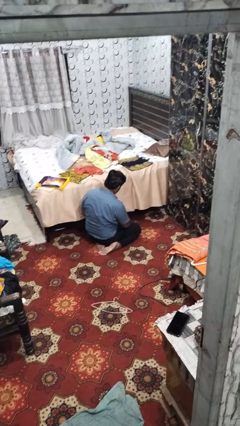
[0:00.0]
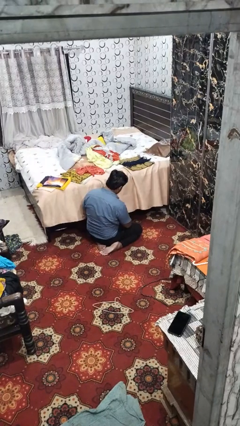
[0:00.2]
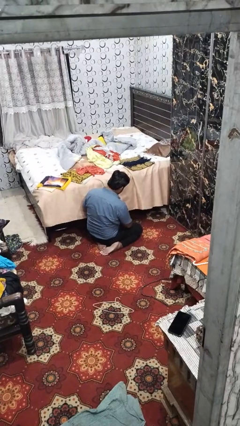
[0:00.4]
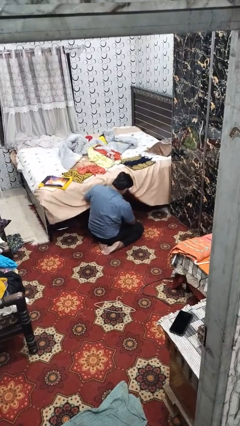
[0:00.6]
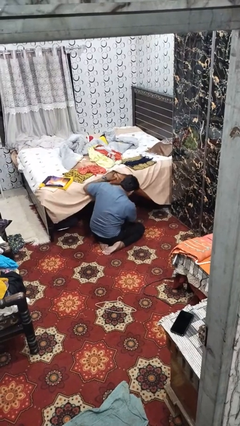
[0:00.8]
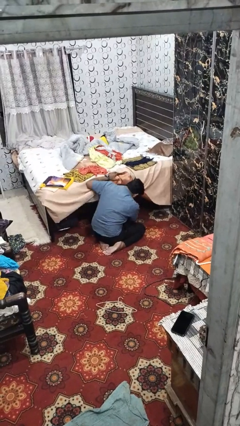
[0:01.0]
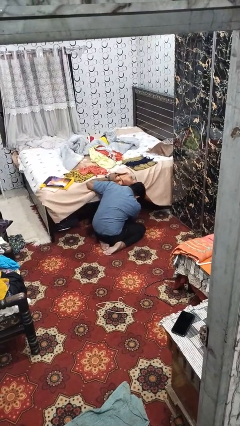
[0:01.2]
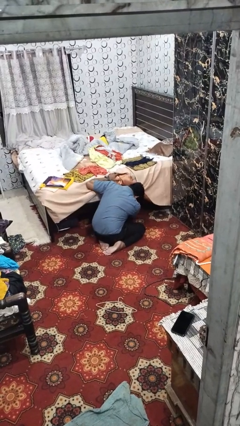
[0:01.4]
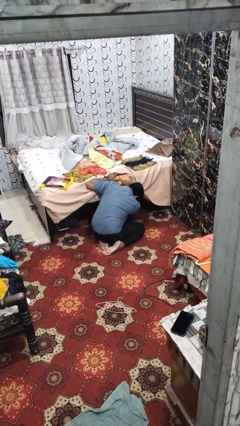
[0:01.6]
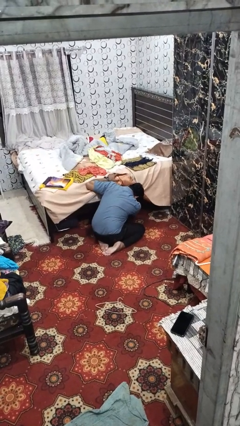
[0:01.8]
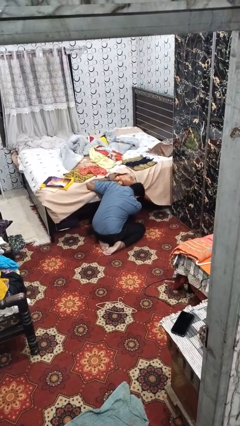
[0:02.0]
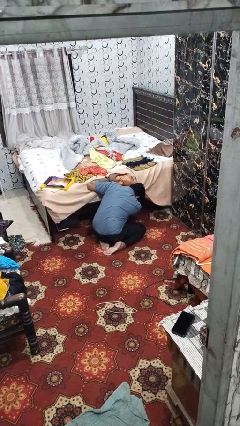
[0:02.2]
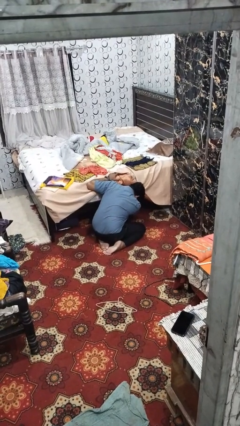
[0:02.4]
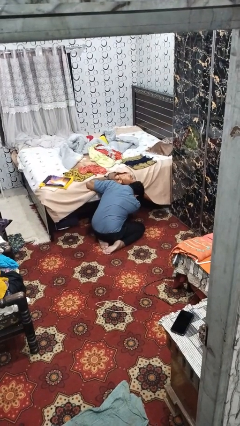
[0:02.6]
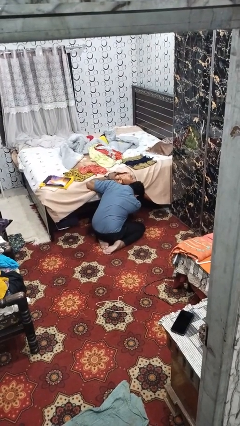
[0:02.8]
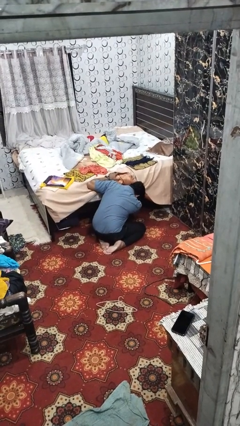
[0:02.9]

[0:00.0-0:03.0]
person searches under bed

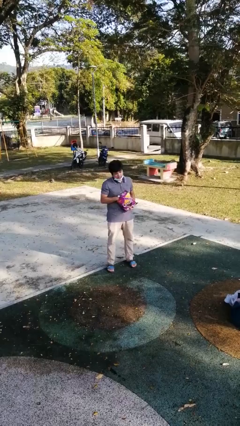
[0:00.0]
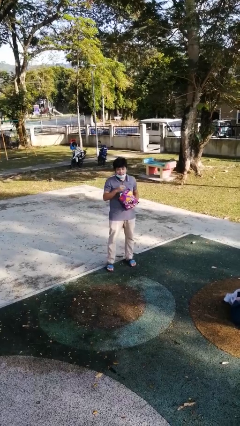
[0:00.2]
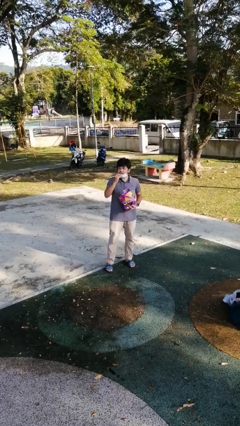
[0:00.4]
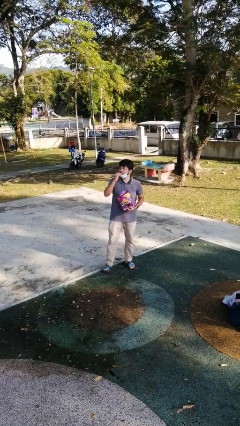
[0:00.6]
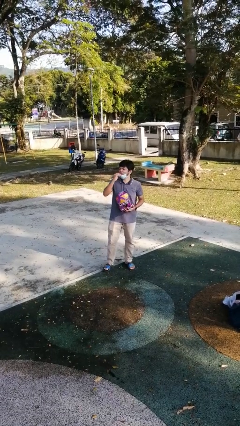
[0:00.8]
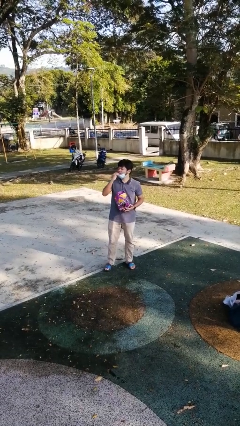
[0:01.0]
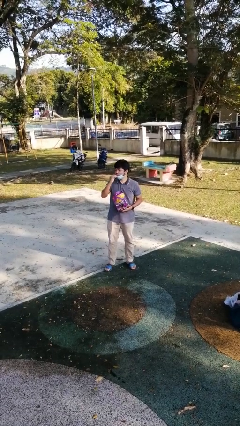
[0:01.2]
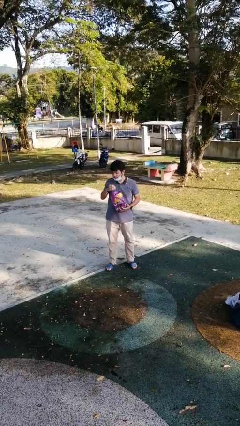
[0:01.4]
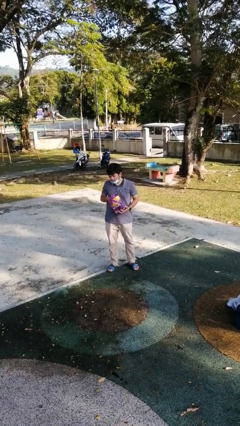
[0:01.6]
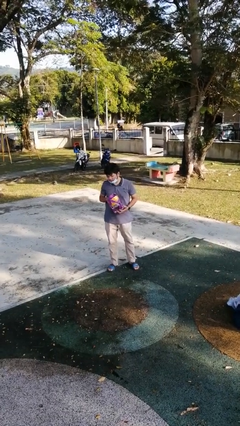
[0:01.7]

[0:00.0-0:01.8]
person eats snack from bag

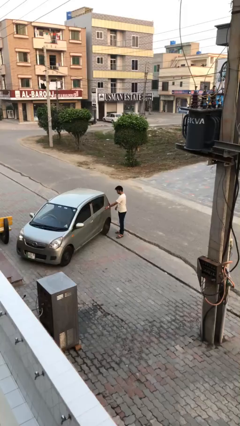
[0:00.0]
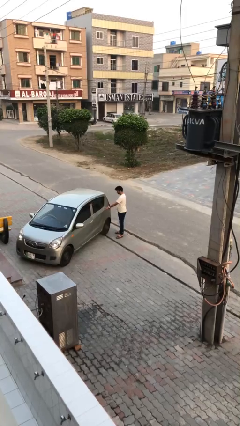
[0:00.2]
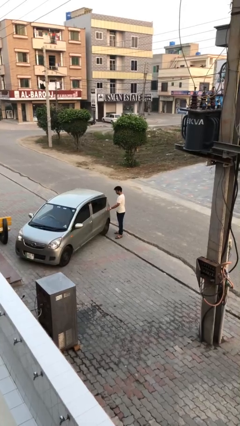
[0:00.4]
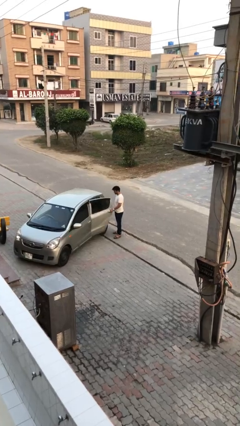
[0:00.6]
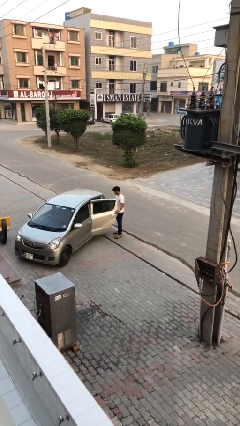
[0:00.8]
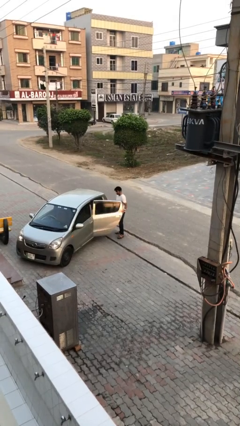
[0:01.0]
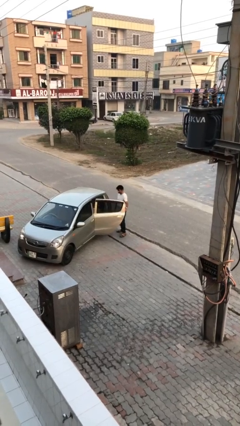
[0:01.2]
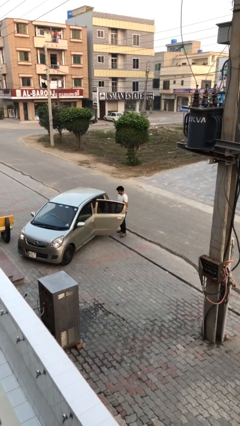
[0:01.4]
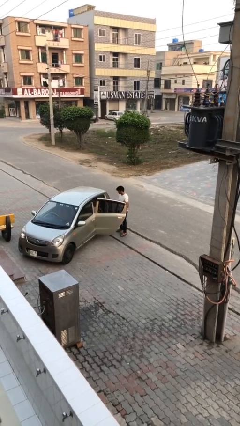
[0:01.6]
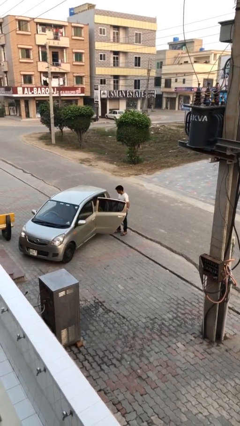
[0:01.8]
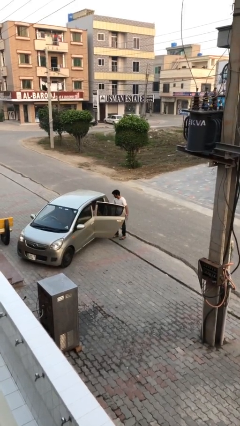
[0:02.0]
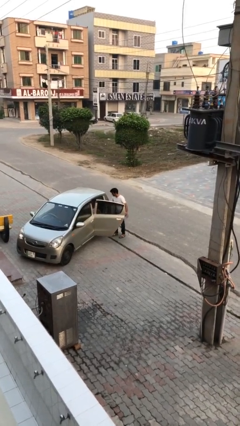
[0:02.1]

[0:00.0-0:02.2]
person opens car door

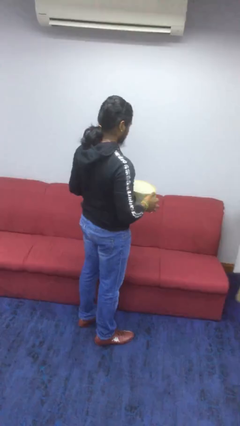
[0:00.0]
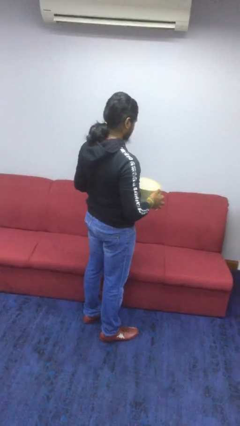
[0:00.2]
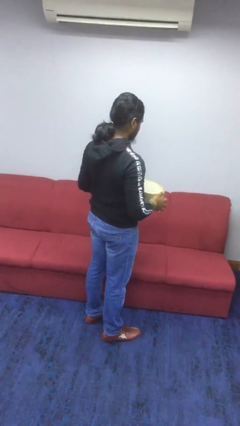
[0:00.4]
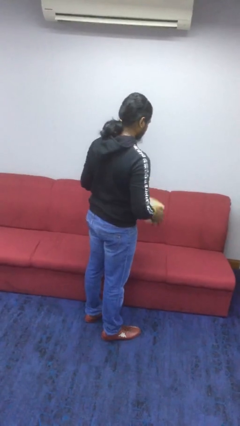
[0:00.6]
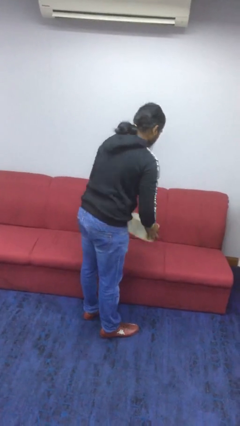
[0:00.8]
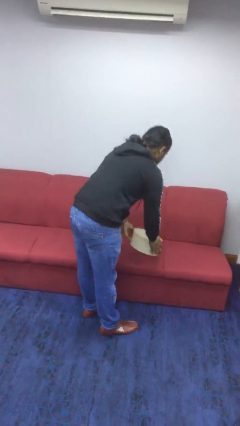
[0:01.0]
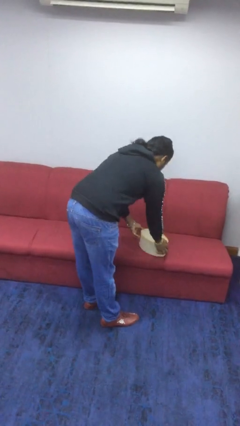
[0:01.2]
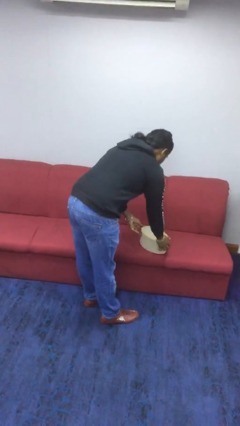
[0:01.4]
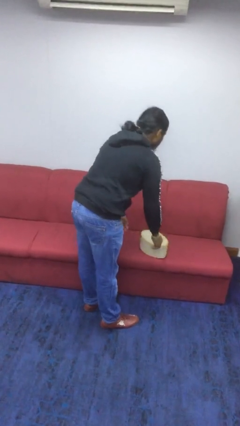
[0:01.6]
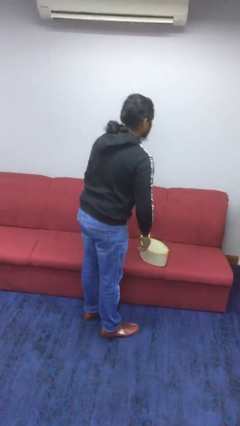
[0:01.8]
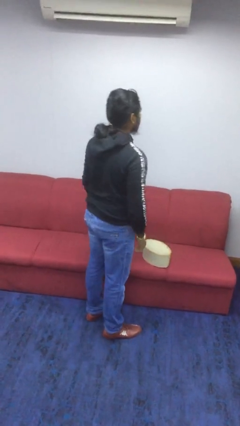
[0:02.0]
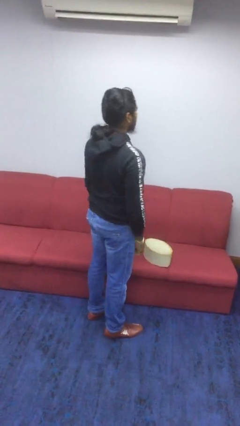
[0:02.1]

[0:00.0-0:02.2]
person puts down object on couch

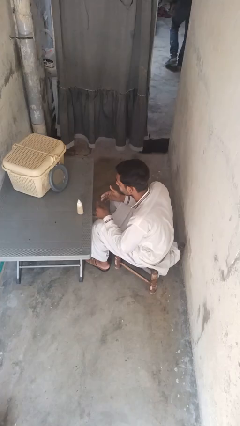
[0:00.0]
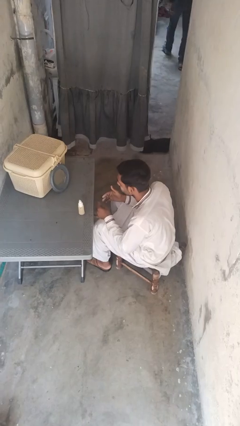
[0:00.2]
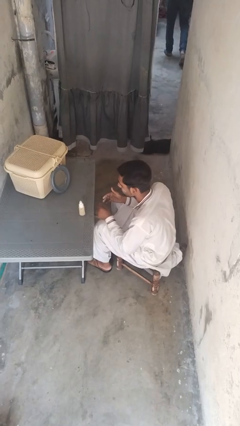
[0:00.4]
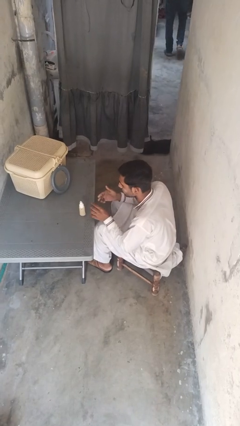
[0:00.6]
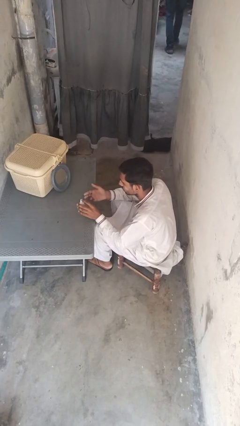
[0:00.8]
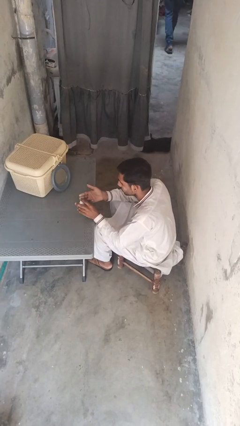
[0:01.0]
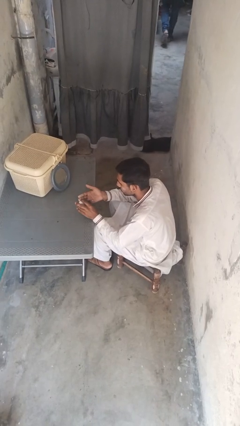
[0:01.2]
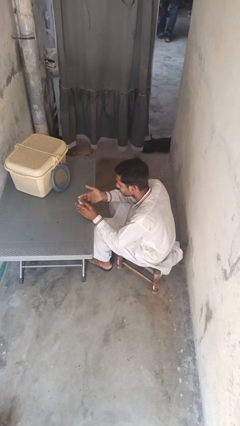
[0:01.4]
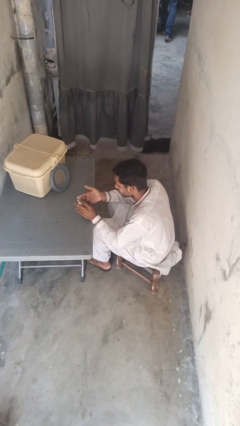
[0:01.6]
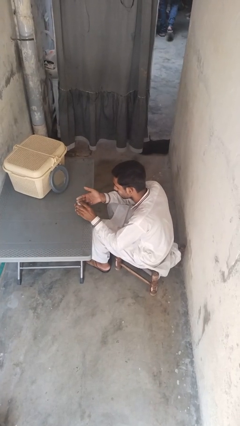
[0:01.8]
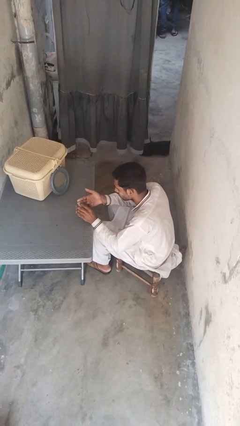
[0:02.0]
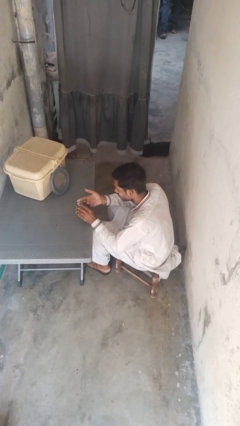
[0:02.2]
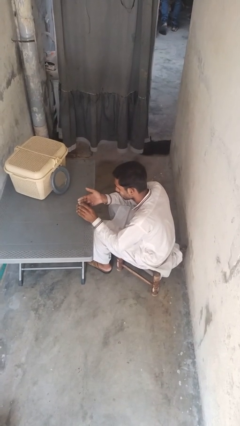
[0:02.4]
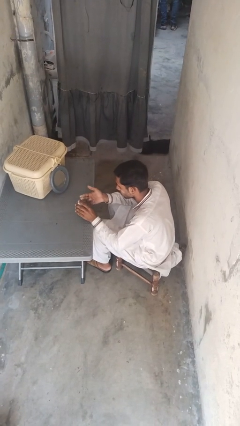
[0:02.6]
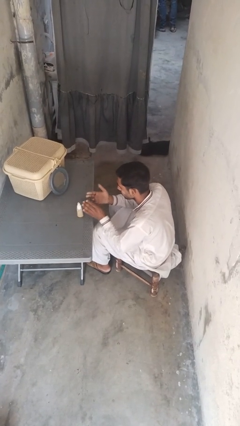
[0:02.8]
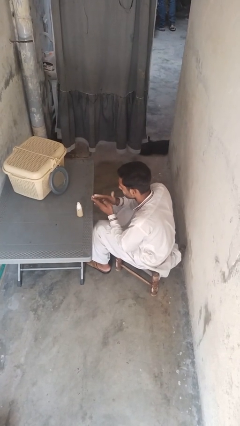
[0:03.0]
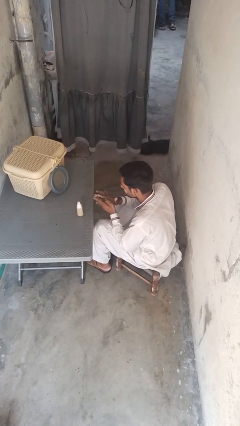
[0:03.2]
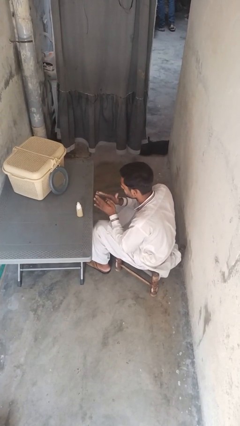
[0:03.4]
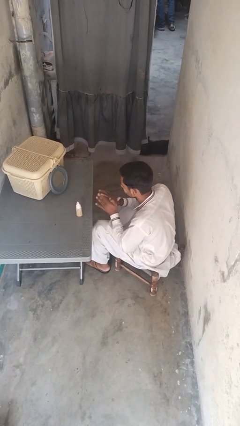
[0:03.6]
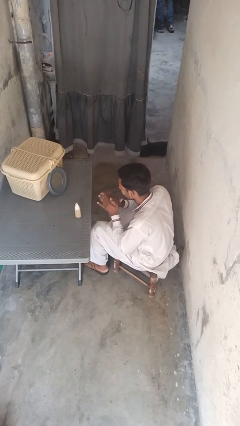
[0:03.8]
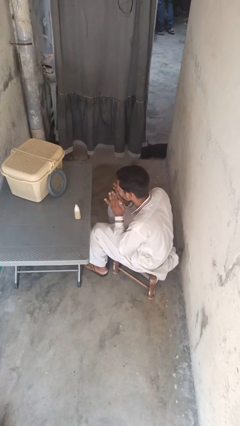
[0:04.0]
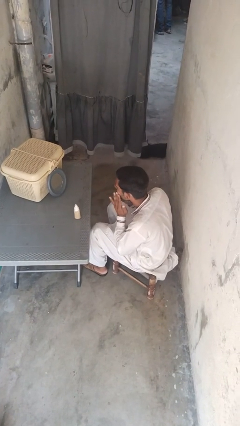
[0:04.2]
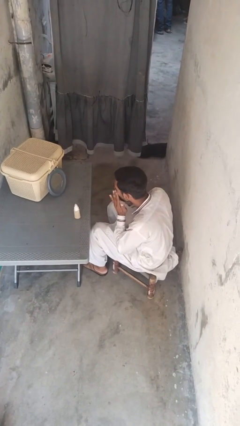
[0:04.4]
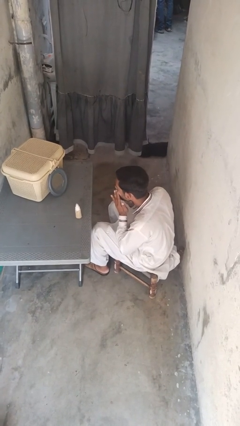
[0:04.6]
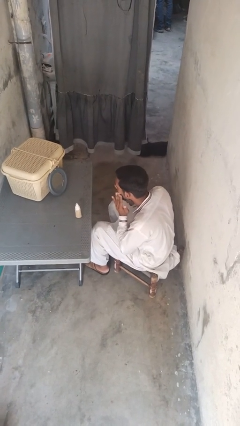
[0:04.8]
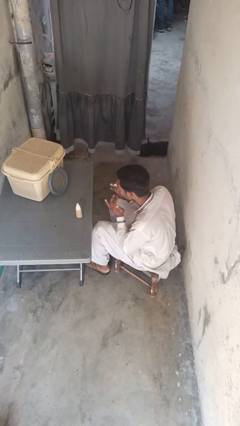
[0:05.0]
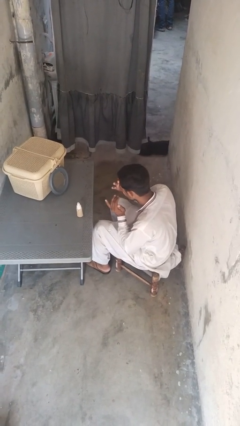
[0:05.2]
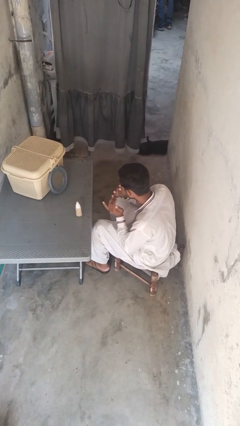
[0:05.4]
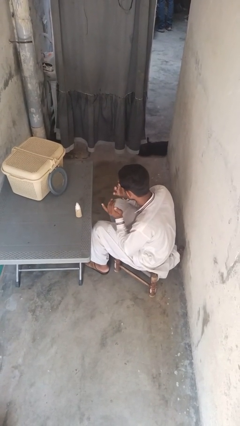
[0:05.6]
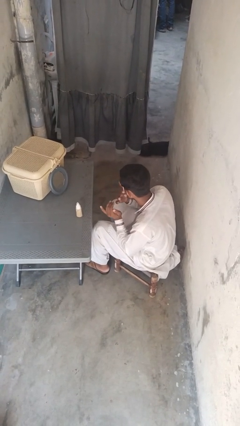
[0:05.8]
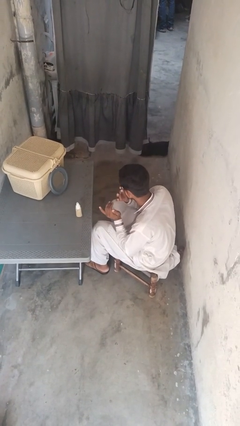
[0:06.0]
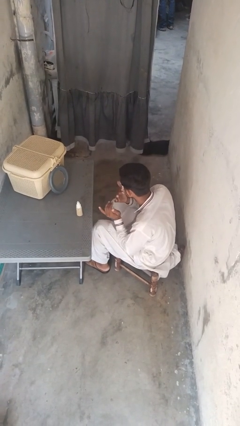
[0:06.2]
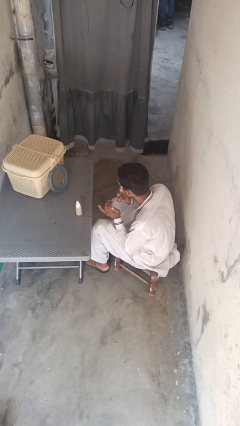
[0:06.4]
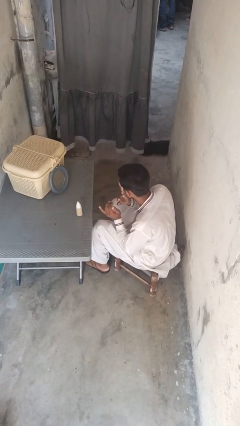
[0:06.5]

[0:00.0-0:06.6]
person applies foundation makeup

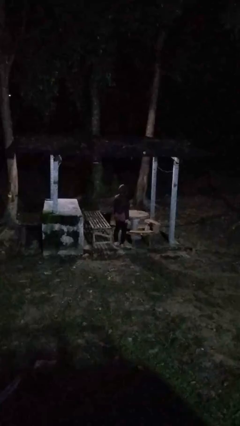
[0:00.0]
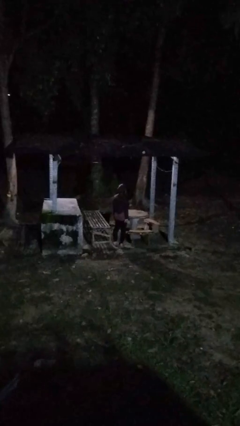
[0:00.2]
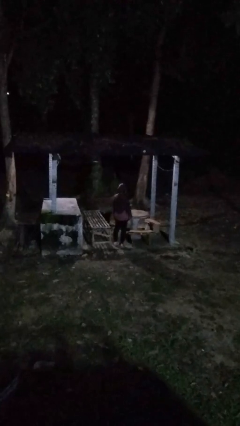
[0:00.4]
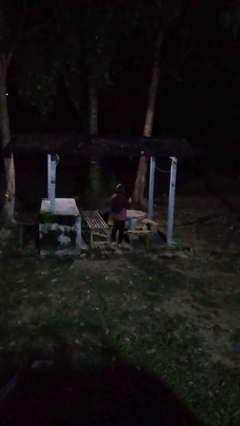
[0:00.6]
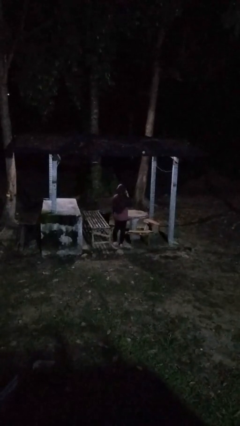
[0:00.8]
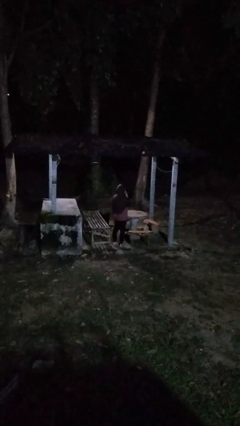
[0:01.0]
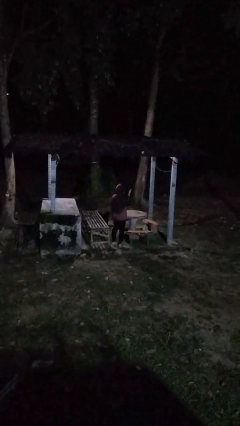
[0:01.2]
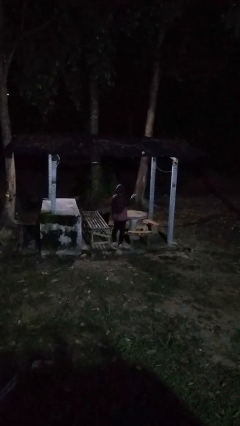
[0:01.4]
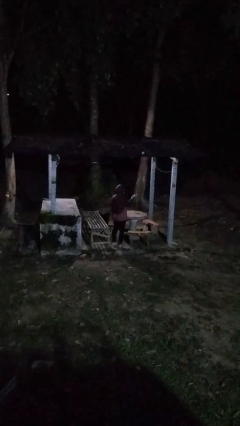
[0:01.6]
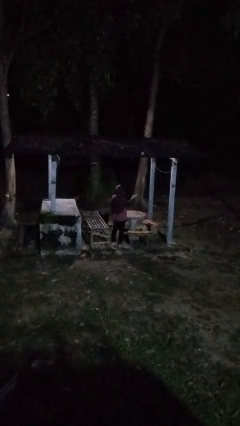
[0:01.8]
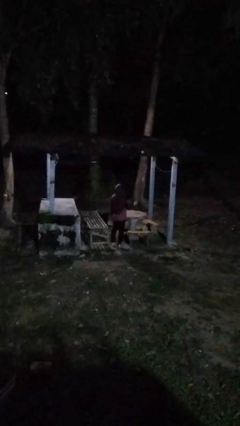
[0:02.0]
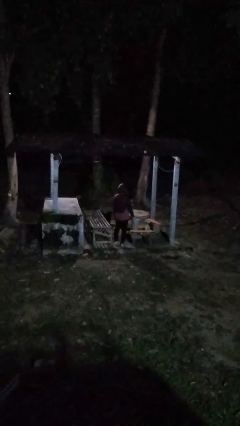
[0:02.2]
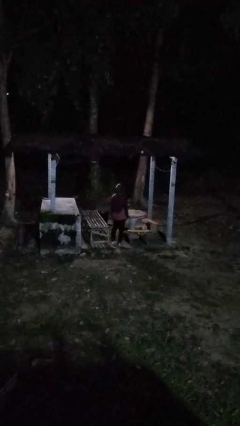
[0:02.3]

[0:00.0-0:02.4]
person gestures blow kiss
